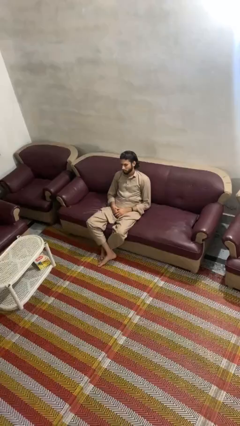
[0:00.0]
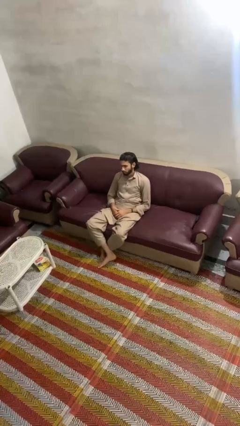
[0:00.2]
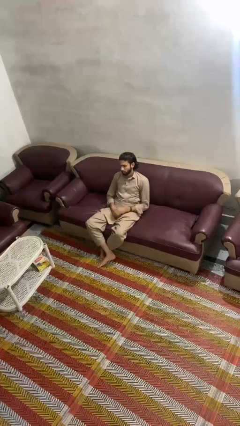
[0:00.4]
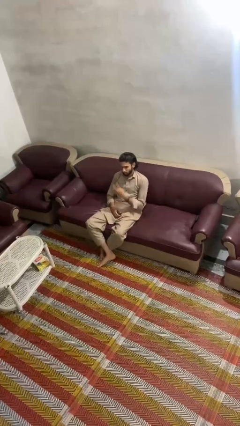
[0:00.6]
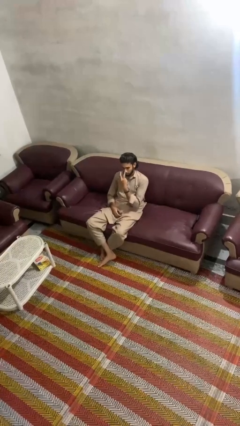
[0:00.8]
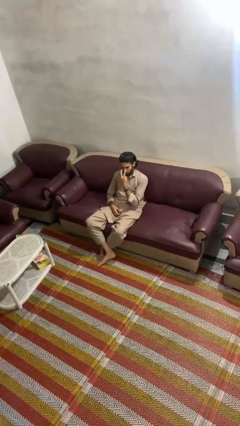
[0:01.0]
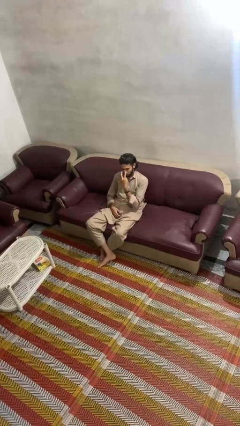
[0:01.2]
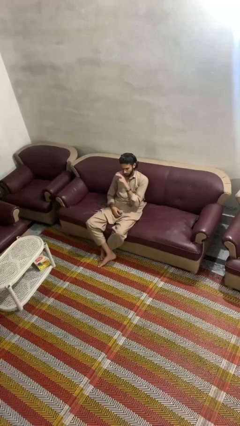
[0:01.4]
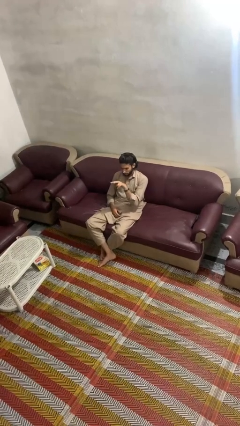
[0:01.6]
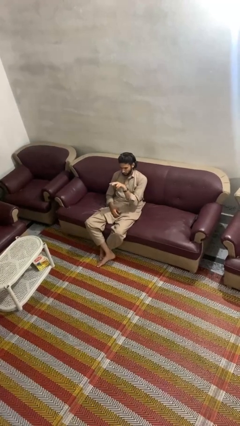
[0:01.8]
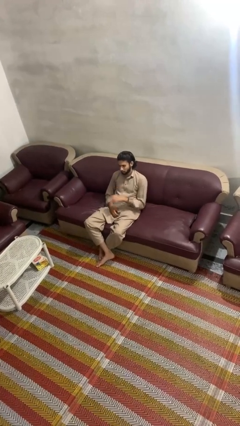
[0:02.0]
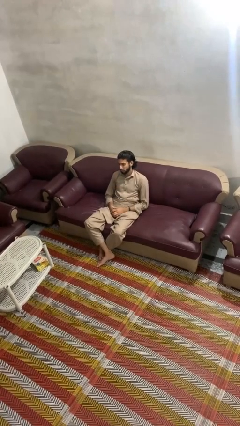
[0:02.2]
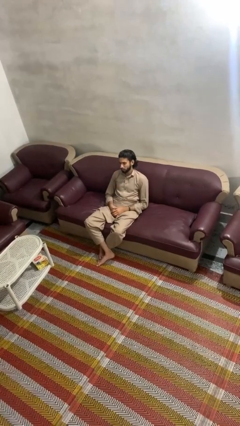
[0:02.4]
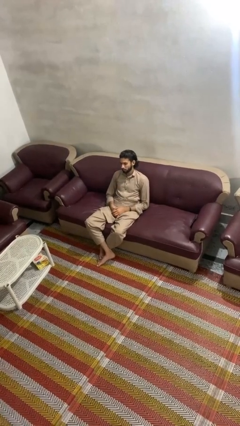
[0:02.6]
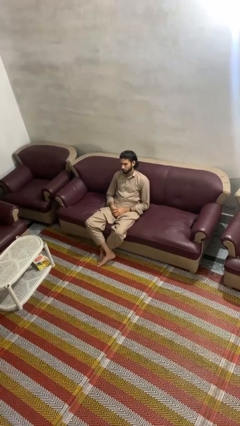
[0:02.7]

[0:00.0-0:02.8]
person gestures watch closely

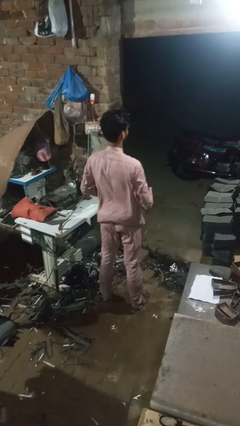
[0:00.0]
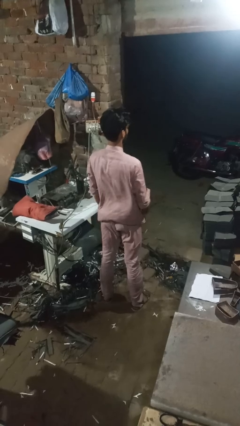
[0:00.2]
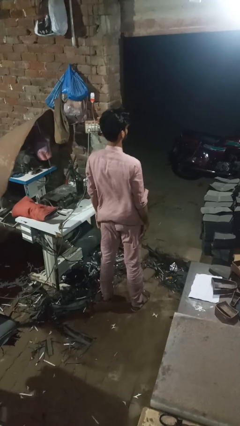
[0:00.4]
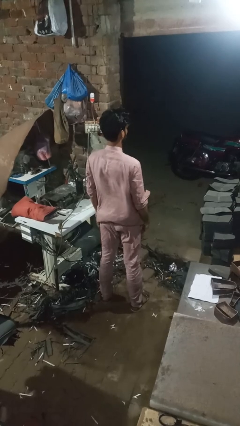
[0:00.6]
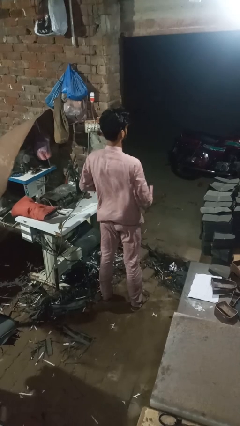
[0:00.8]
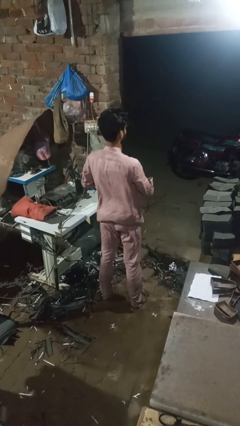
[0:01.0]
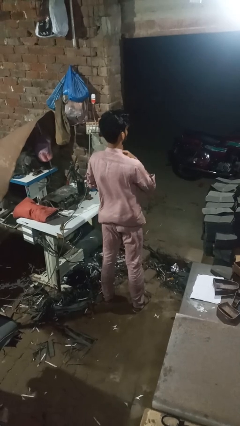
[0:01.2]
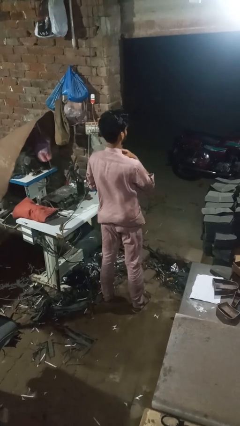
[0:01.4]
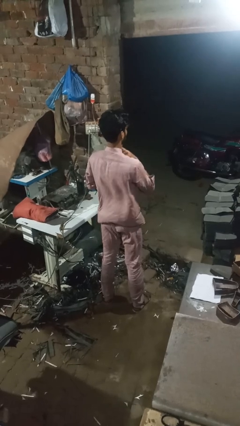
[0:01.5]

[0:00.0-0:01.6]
person buttons shirt

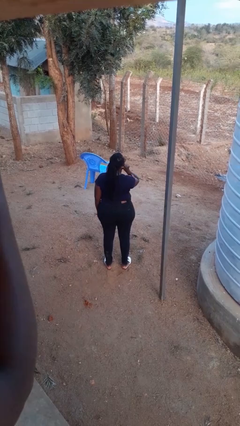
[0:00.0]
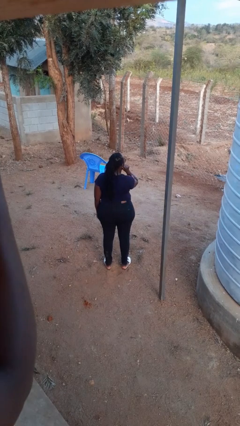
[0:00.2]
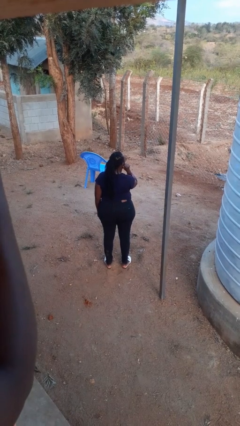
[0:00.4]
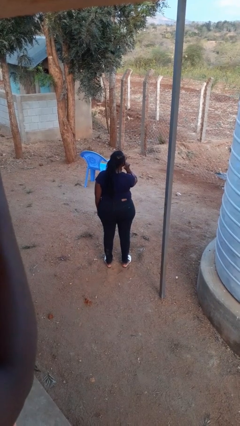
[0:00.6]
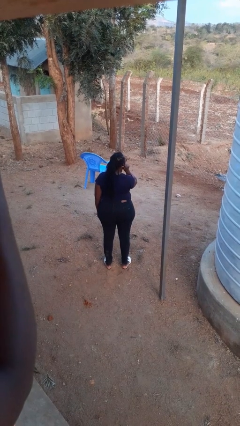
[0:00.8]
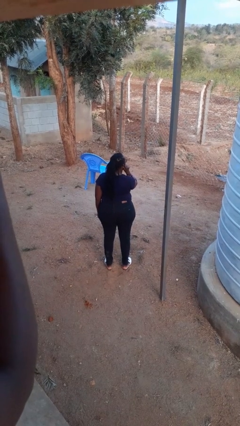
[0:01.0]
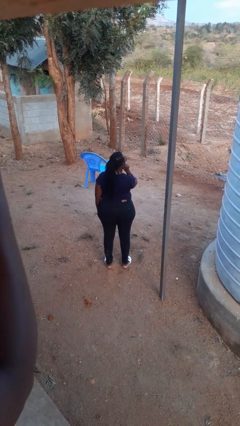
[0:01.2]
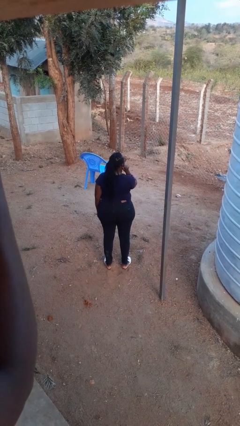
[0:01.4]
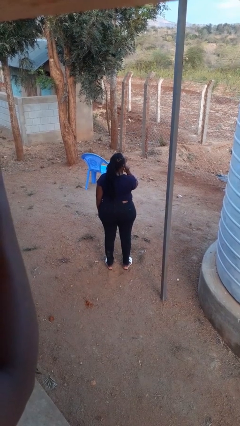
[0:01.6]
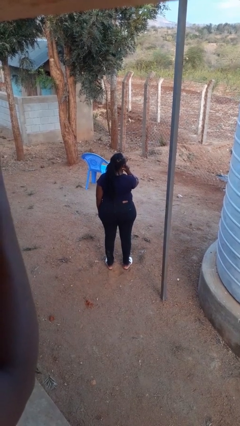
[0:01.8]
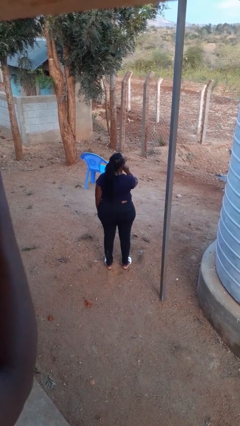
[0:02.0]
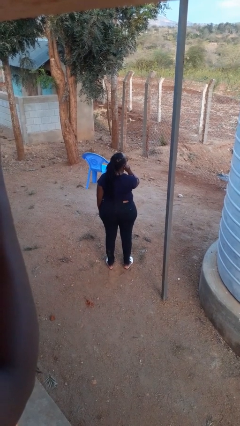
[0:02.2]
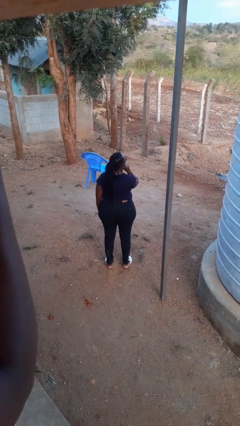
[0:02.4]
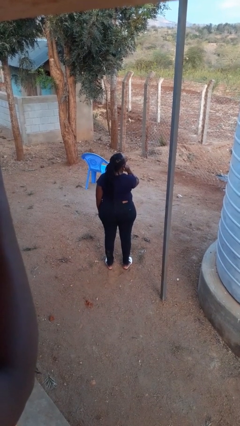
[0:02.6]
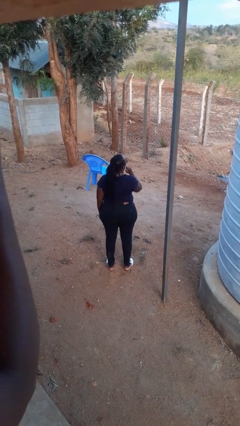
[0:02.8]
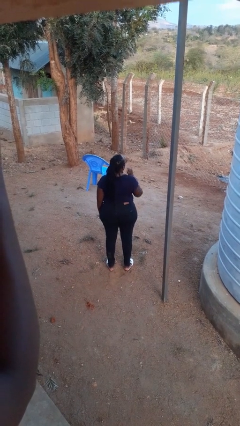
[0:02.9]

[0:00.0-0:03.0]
person touches earlobe

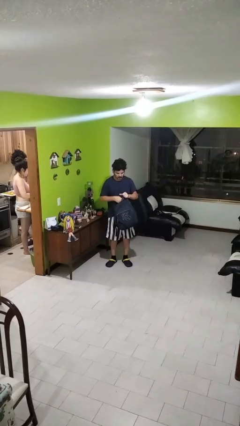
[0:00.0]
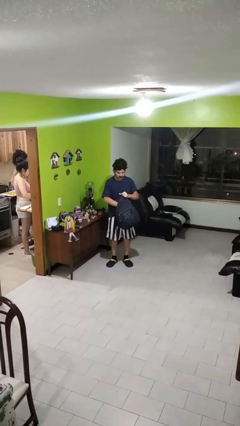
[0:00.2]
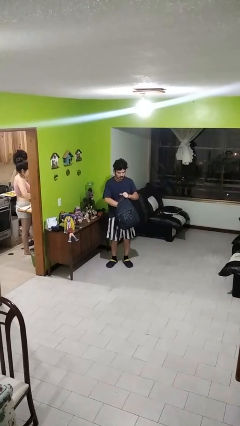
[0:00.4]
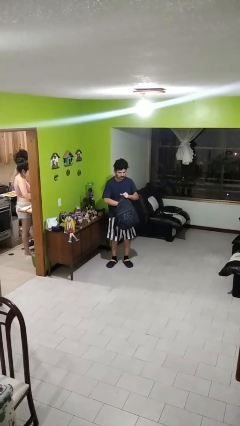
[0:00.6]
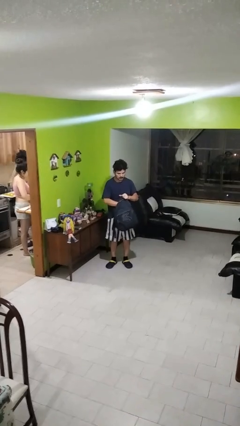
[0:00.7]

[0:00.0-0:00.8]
person searches in purse

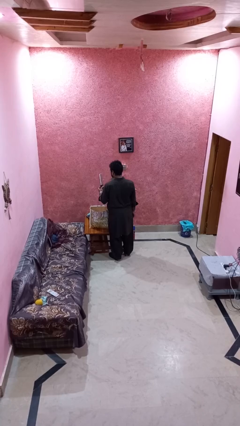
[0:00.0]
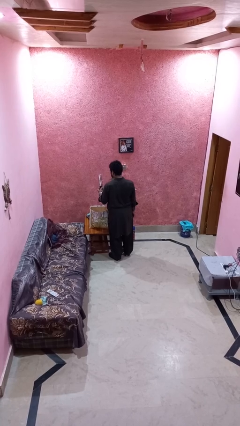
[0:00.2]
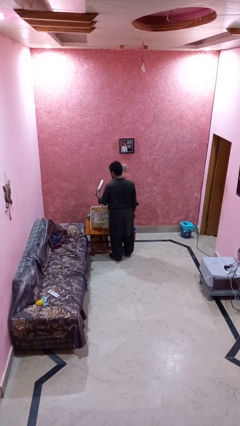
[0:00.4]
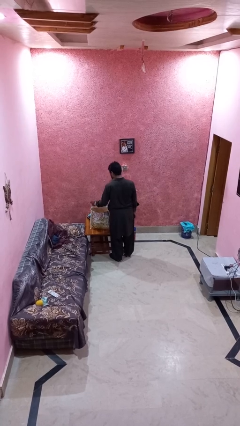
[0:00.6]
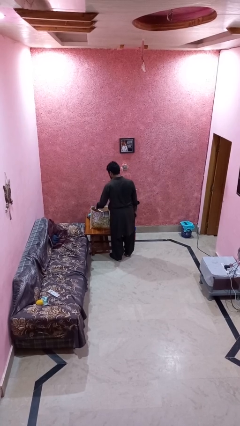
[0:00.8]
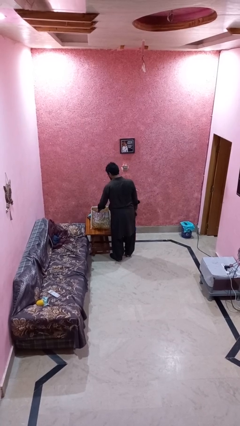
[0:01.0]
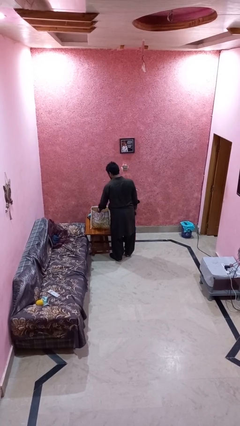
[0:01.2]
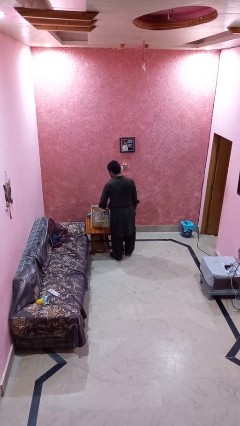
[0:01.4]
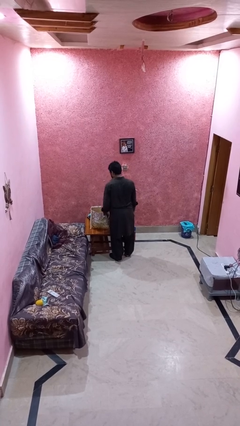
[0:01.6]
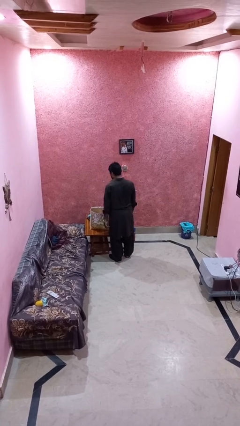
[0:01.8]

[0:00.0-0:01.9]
person puts object into bag

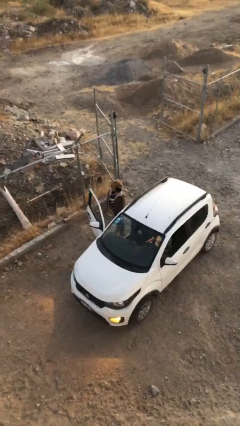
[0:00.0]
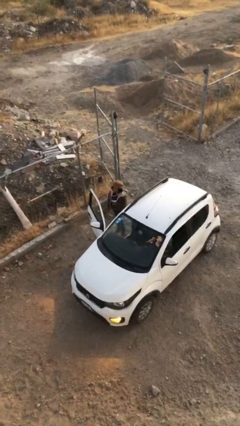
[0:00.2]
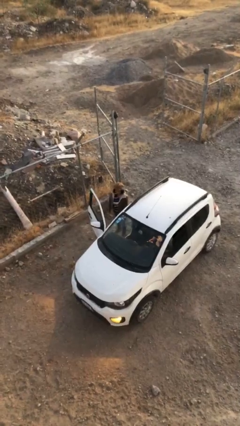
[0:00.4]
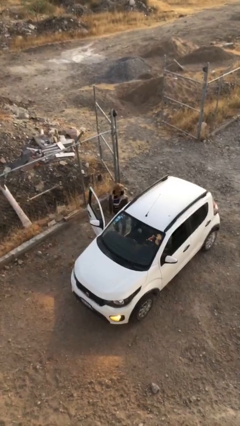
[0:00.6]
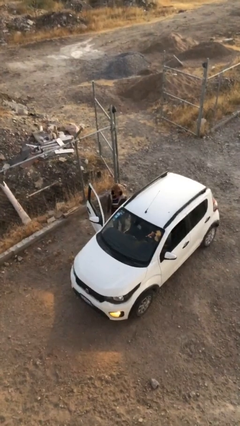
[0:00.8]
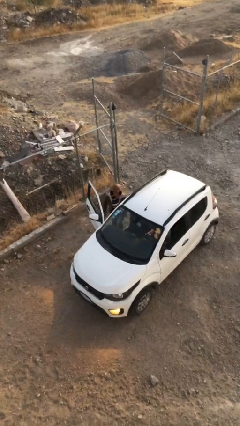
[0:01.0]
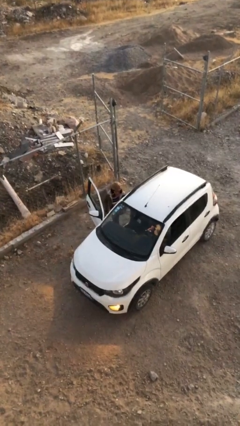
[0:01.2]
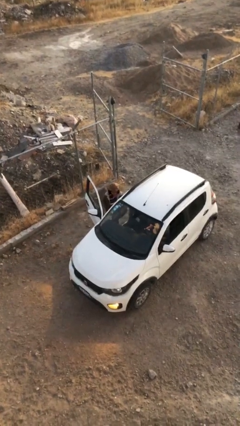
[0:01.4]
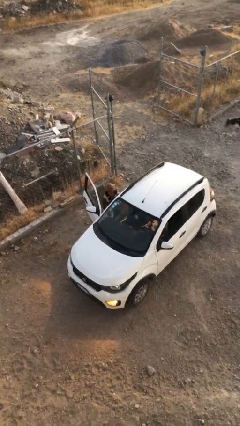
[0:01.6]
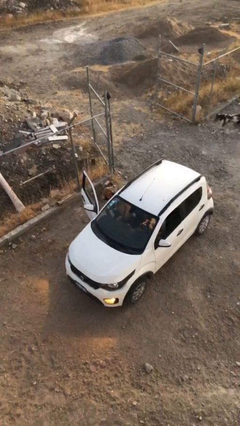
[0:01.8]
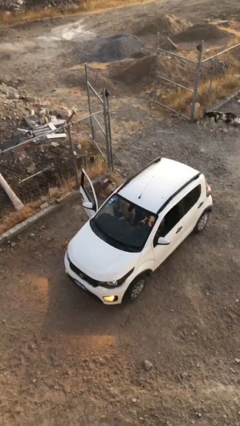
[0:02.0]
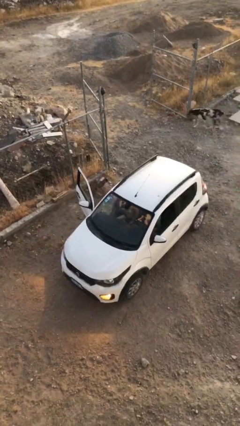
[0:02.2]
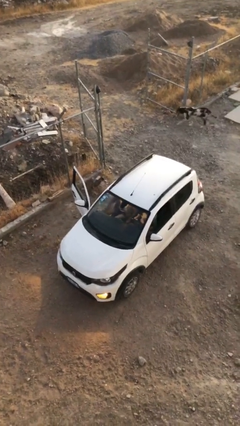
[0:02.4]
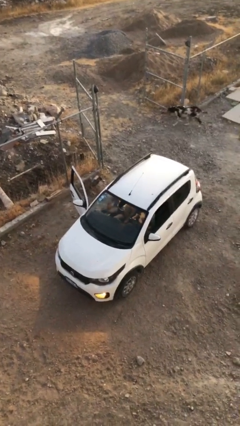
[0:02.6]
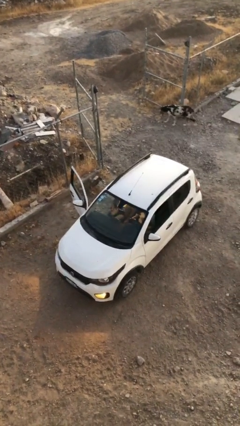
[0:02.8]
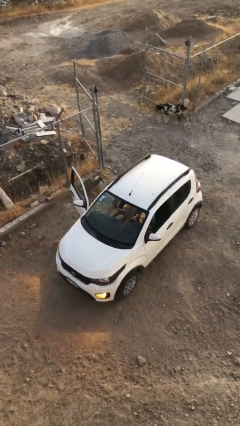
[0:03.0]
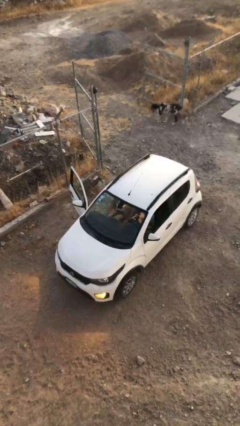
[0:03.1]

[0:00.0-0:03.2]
person enters car

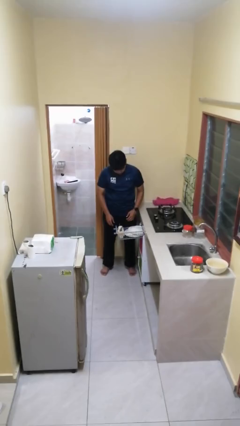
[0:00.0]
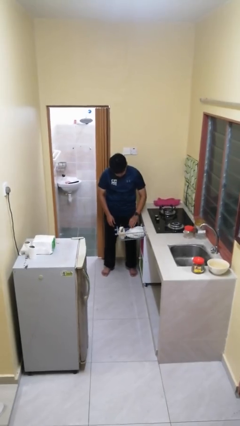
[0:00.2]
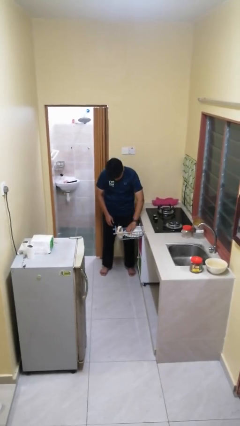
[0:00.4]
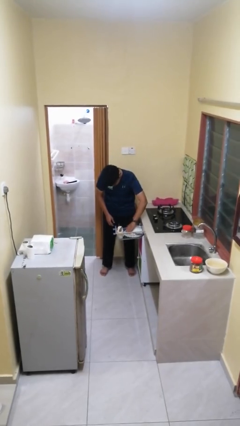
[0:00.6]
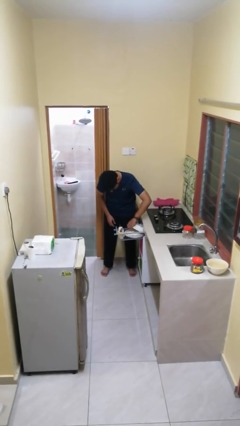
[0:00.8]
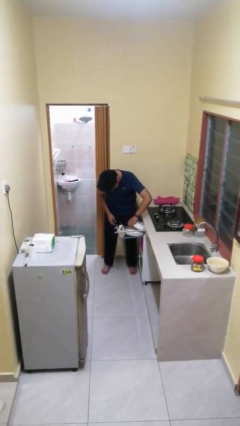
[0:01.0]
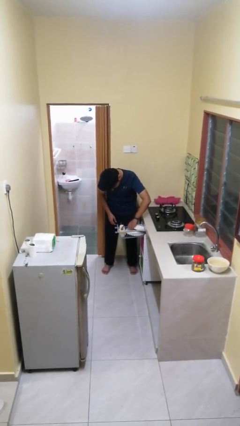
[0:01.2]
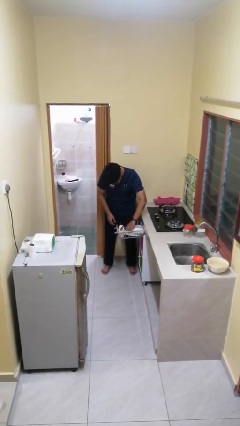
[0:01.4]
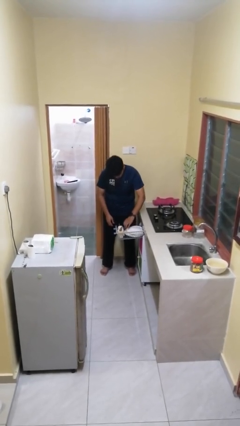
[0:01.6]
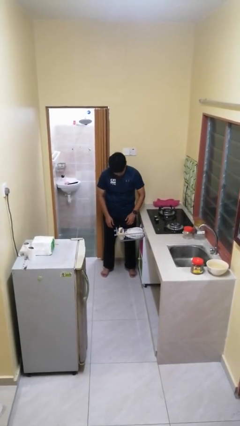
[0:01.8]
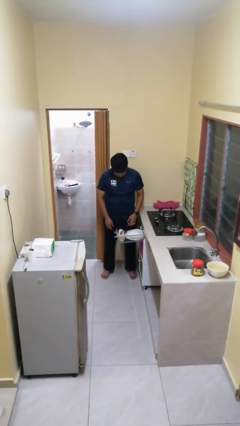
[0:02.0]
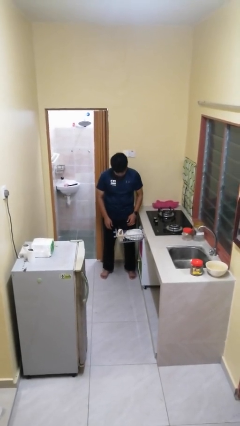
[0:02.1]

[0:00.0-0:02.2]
person searches in kitchen drawer

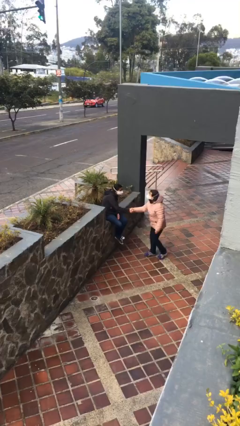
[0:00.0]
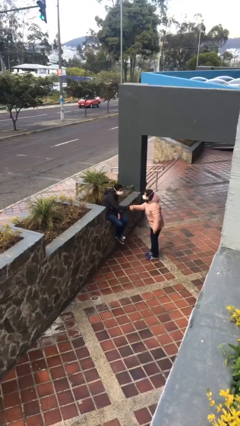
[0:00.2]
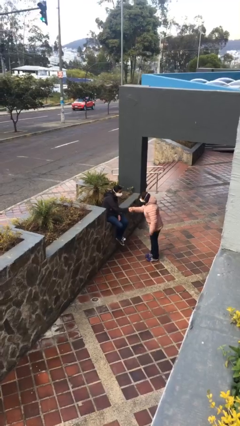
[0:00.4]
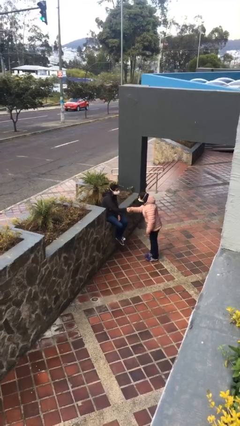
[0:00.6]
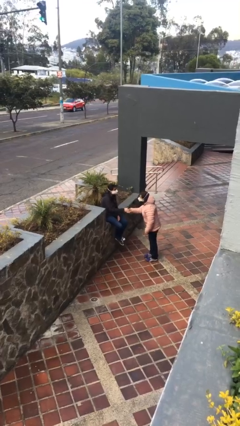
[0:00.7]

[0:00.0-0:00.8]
person shakes hand

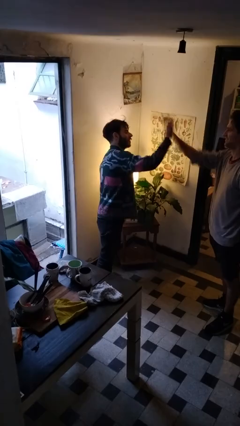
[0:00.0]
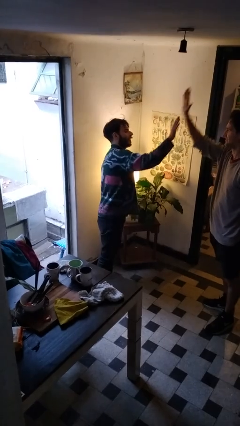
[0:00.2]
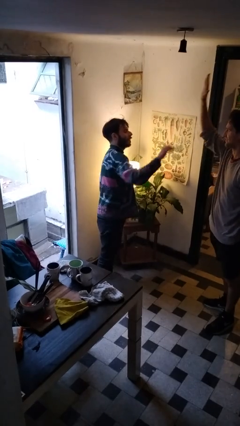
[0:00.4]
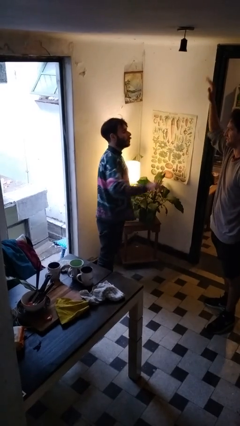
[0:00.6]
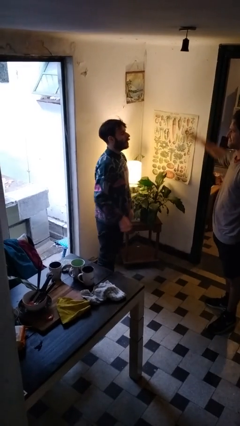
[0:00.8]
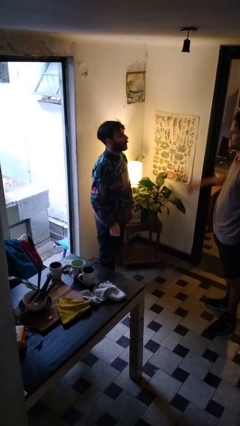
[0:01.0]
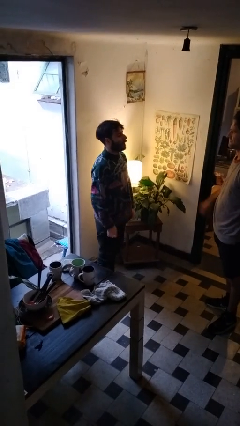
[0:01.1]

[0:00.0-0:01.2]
person highfives hand
